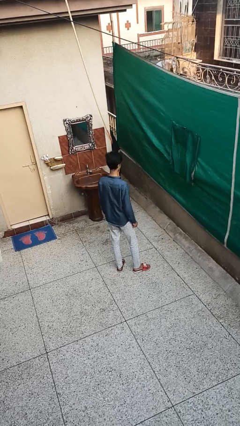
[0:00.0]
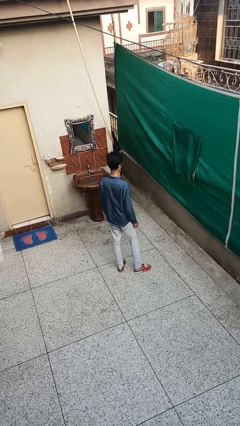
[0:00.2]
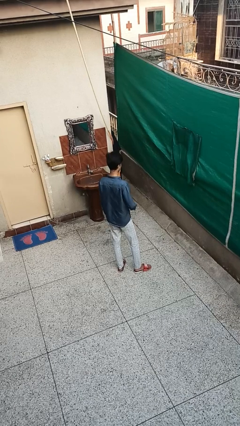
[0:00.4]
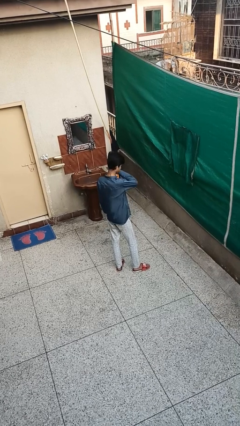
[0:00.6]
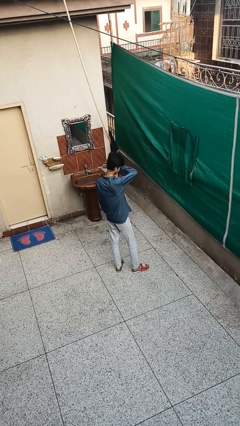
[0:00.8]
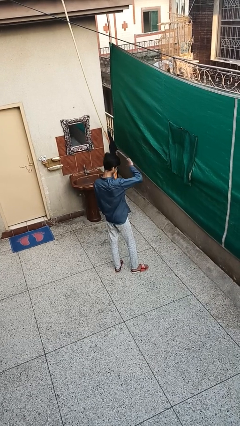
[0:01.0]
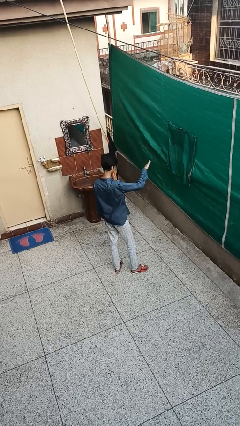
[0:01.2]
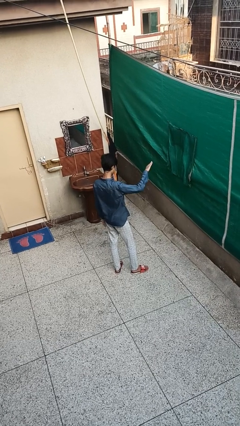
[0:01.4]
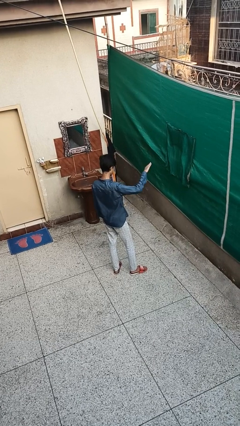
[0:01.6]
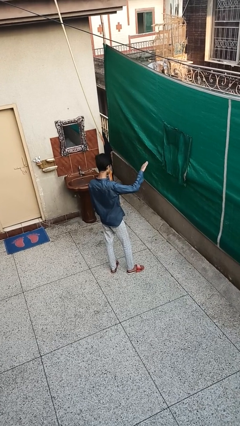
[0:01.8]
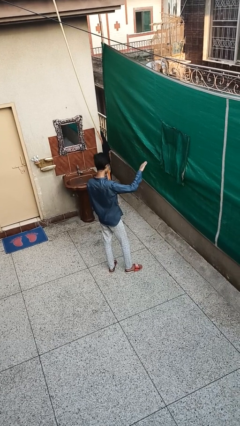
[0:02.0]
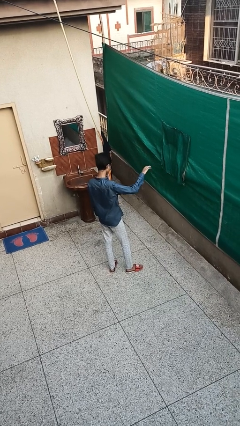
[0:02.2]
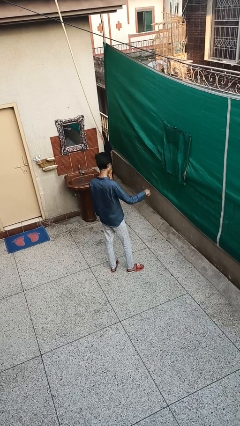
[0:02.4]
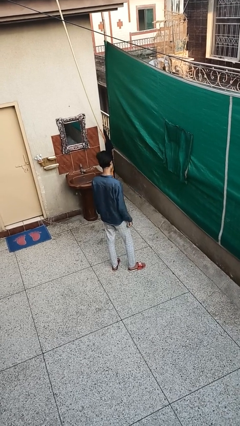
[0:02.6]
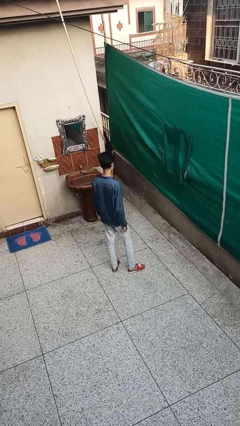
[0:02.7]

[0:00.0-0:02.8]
person gestures swipe right

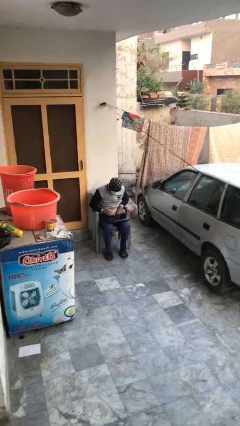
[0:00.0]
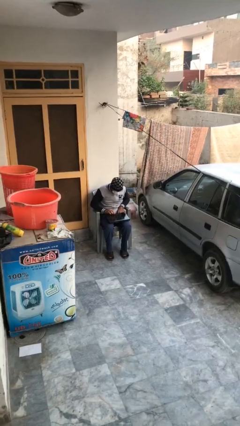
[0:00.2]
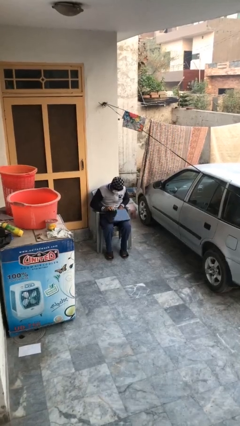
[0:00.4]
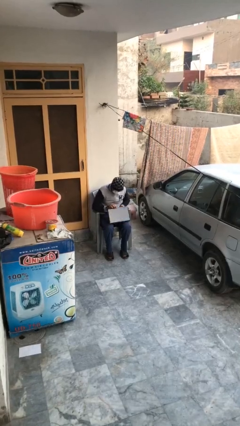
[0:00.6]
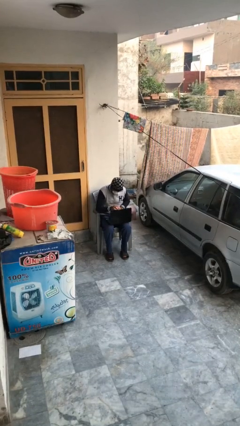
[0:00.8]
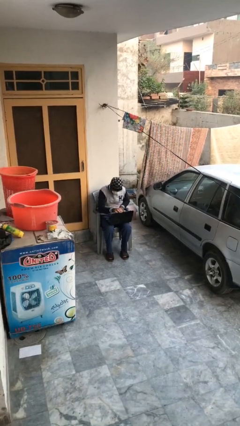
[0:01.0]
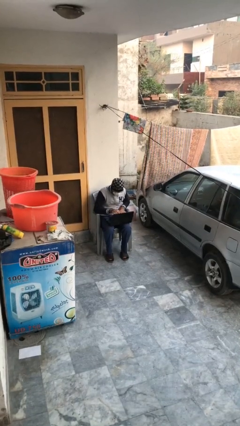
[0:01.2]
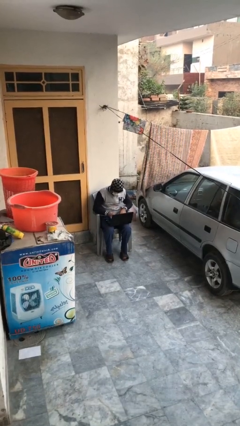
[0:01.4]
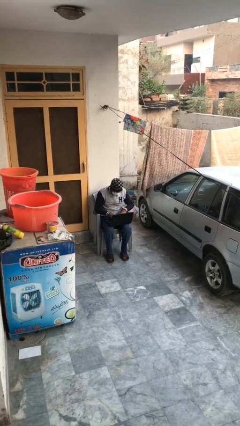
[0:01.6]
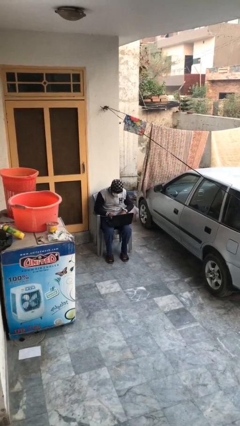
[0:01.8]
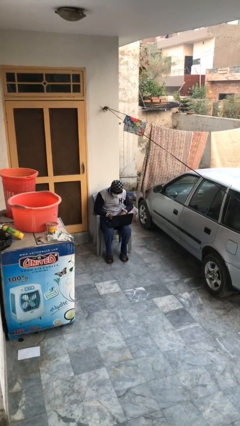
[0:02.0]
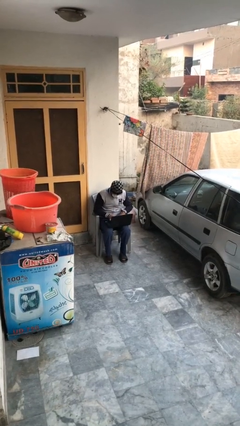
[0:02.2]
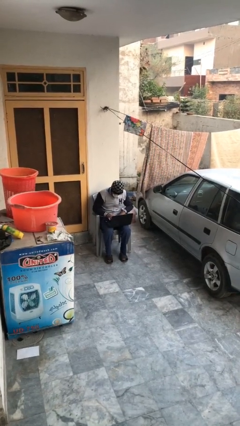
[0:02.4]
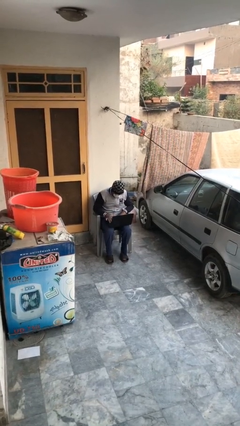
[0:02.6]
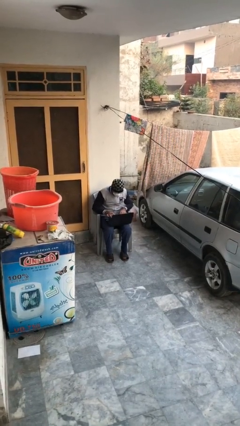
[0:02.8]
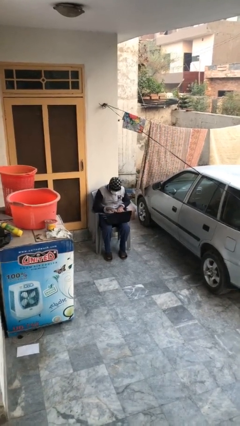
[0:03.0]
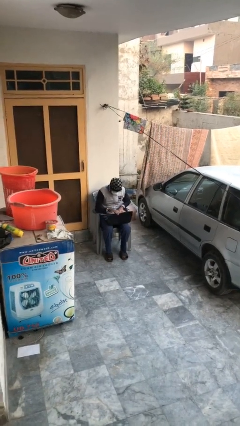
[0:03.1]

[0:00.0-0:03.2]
person interacts with laptop

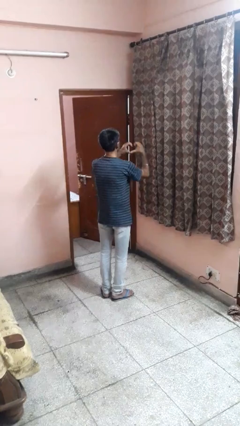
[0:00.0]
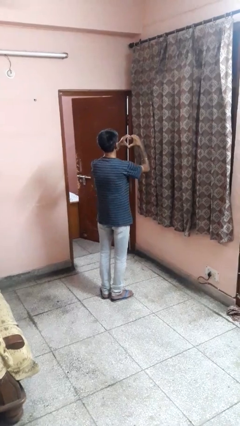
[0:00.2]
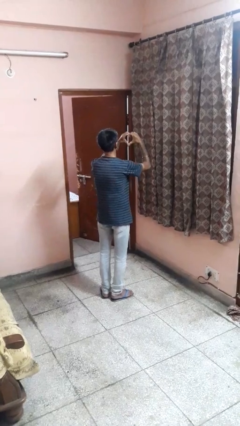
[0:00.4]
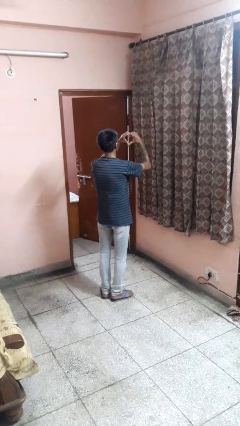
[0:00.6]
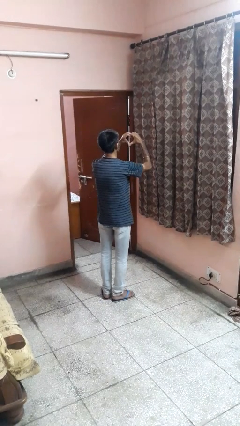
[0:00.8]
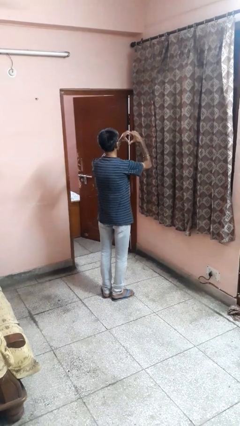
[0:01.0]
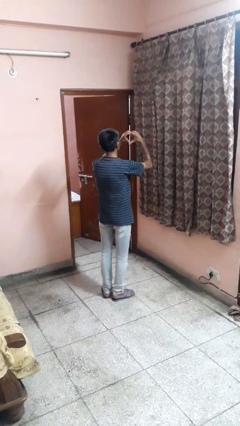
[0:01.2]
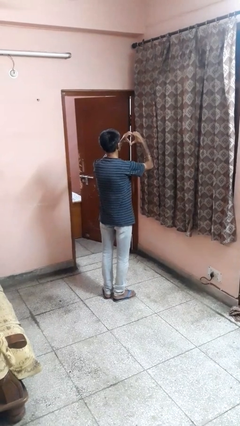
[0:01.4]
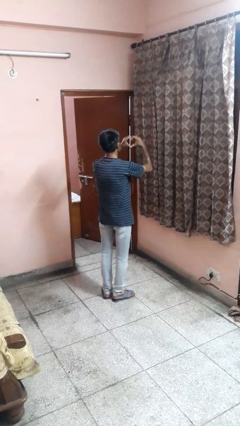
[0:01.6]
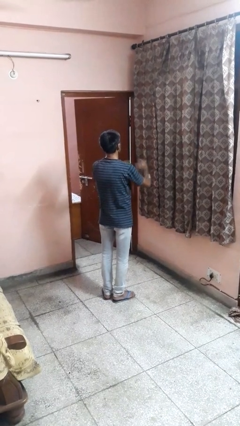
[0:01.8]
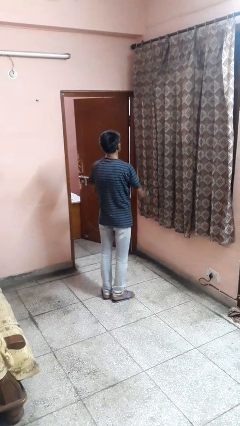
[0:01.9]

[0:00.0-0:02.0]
person gestures heart

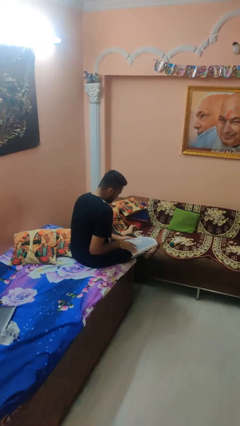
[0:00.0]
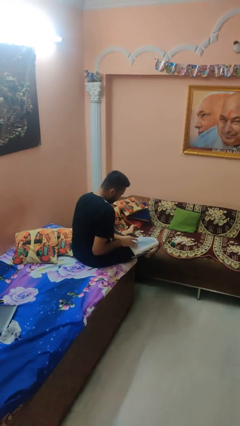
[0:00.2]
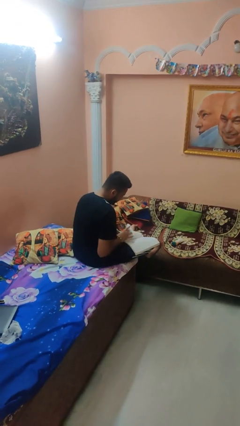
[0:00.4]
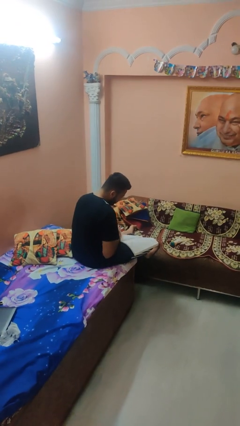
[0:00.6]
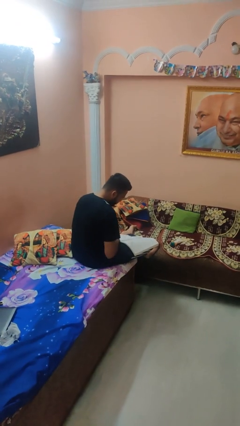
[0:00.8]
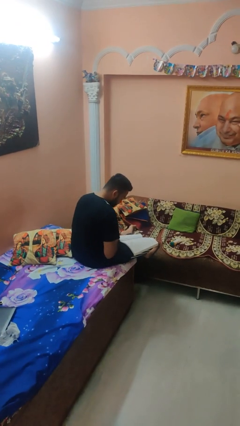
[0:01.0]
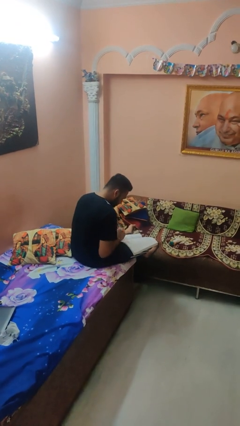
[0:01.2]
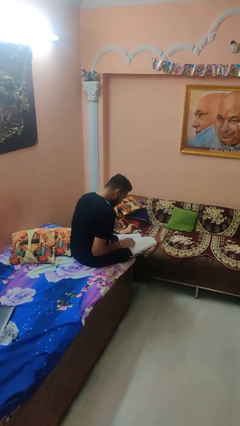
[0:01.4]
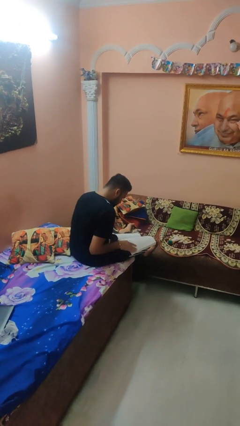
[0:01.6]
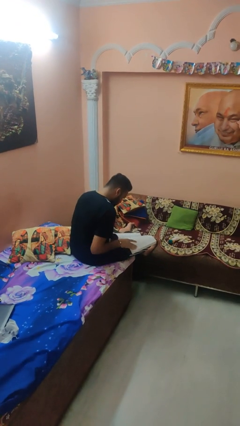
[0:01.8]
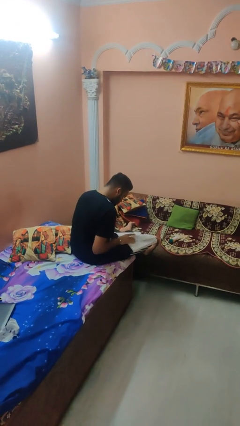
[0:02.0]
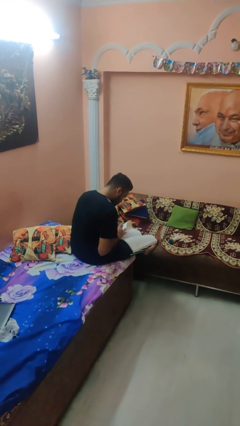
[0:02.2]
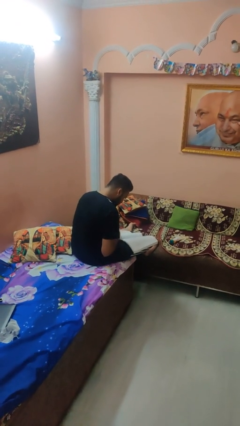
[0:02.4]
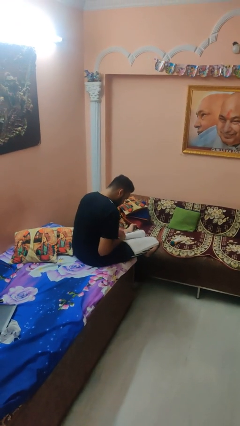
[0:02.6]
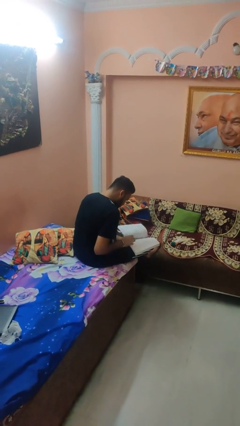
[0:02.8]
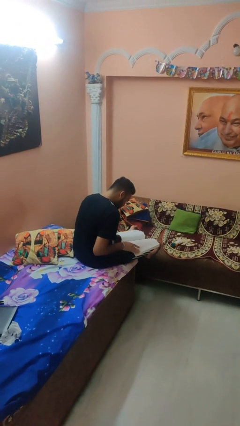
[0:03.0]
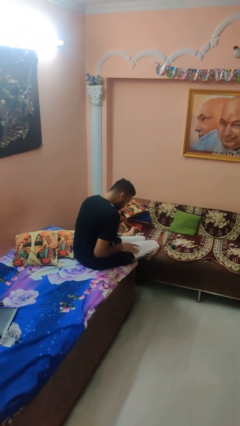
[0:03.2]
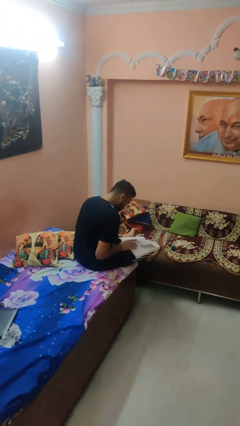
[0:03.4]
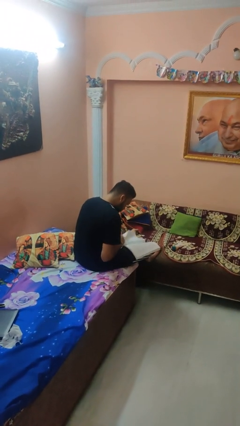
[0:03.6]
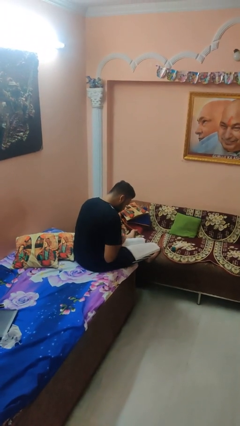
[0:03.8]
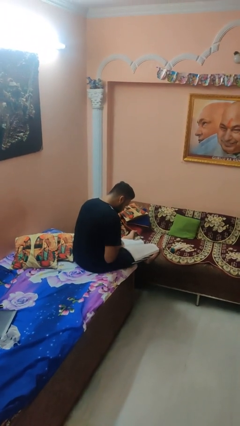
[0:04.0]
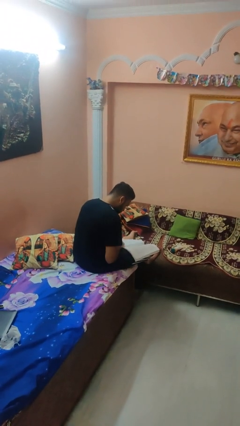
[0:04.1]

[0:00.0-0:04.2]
person reads book

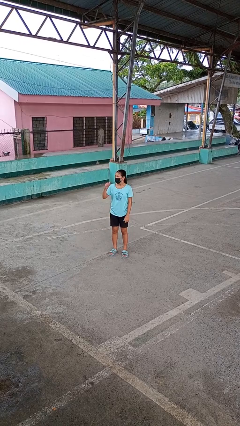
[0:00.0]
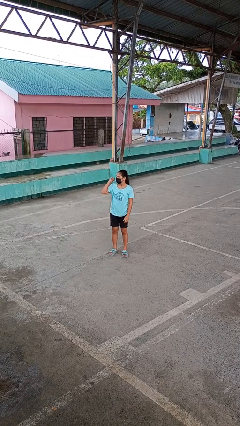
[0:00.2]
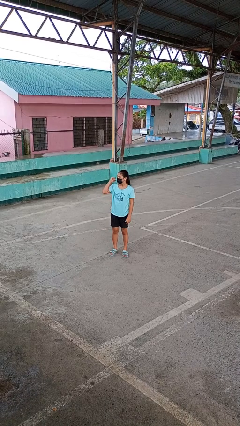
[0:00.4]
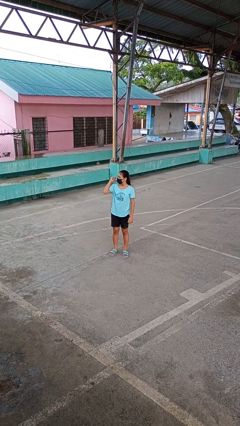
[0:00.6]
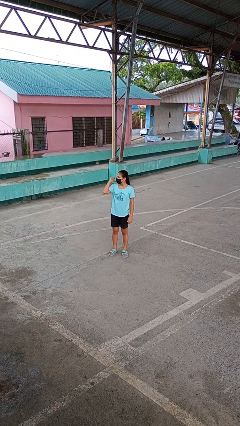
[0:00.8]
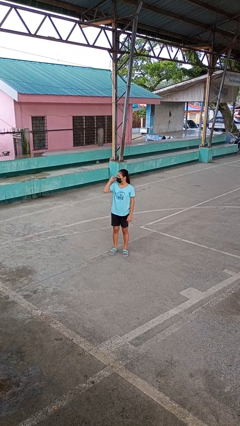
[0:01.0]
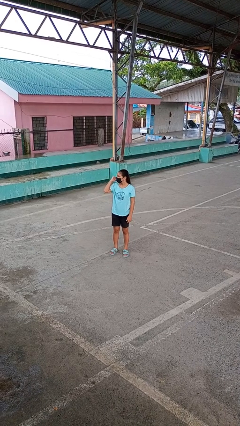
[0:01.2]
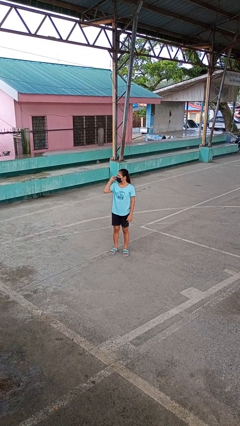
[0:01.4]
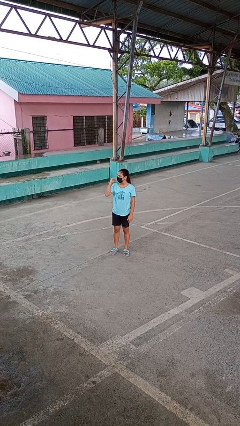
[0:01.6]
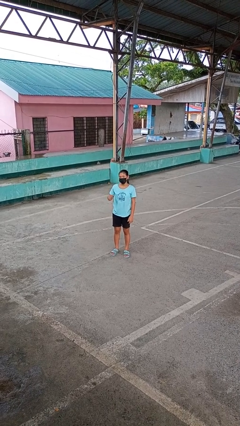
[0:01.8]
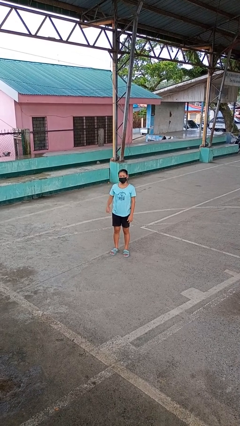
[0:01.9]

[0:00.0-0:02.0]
person gestures behind me

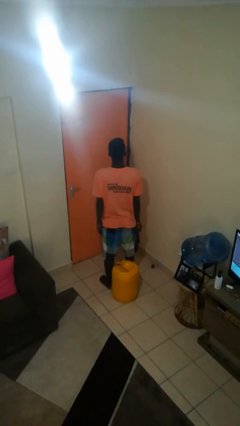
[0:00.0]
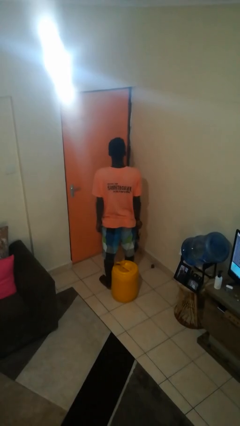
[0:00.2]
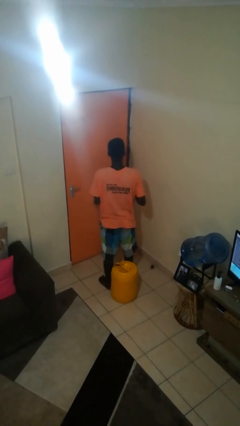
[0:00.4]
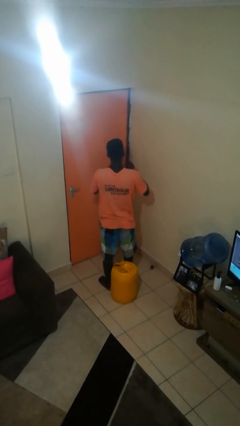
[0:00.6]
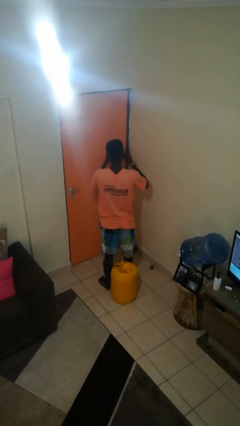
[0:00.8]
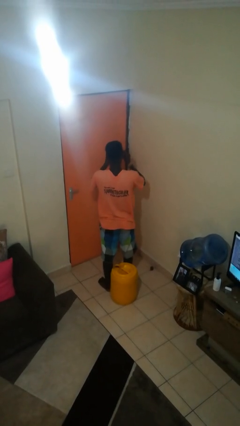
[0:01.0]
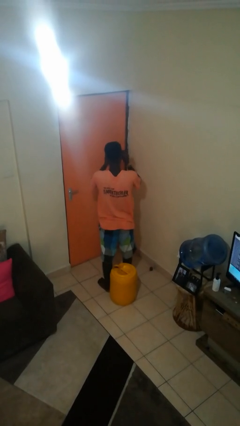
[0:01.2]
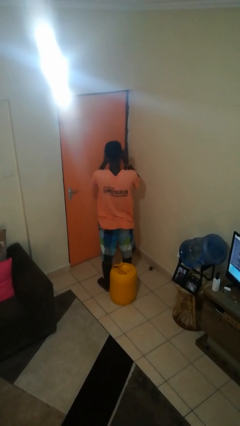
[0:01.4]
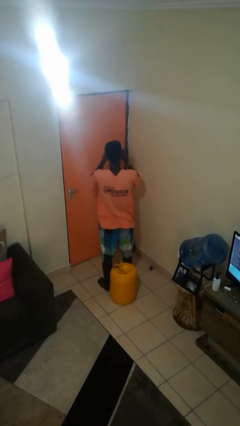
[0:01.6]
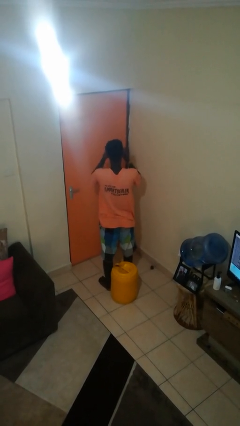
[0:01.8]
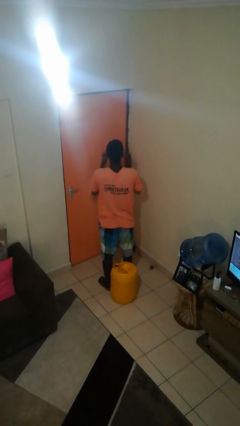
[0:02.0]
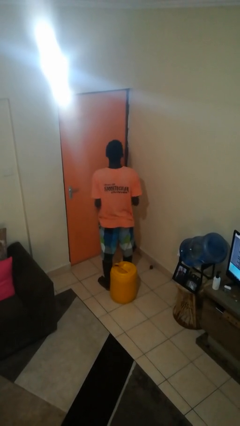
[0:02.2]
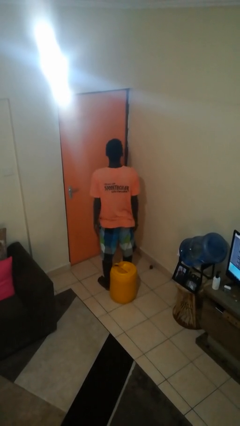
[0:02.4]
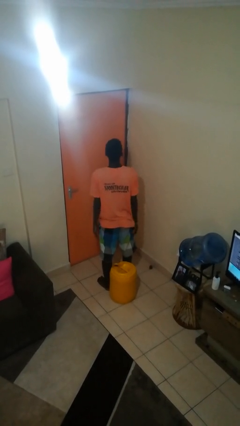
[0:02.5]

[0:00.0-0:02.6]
person puts on sunglasses
